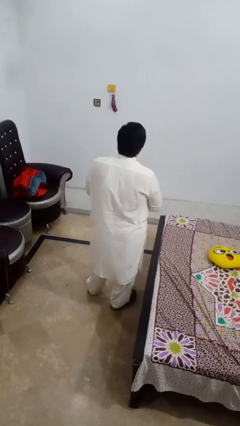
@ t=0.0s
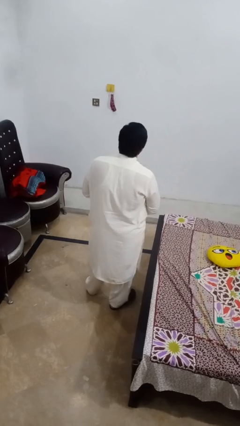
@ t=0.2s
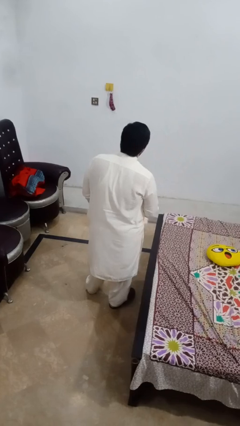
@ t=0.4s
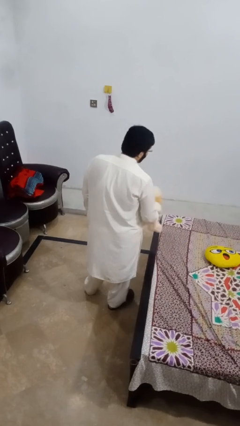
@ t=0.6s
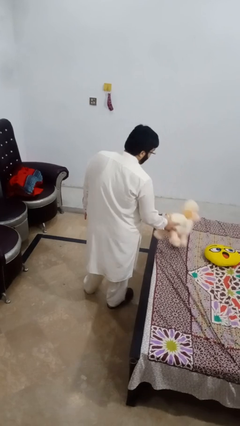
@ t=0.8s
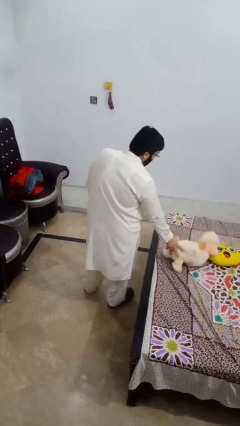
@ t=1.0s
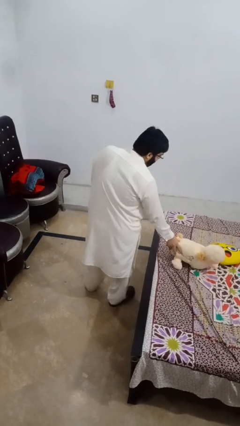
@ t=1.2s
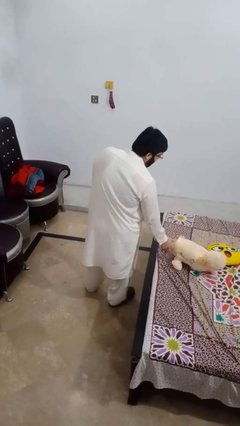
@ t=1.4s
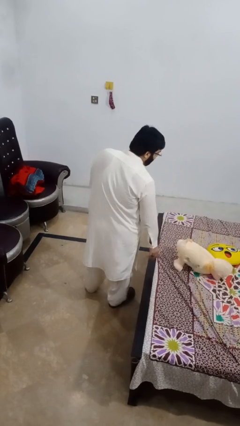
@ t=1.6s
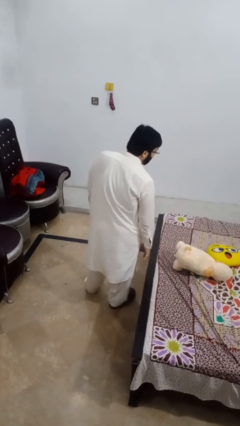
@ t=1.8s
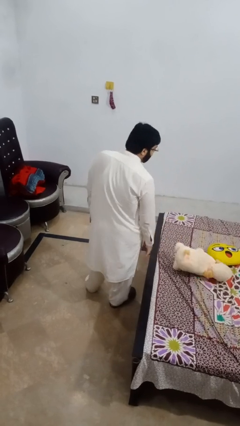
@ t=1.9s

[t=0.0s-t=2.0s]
person puts down object on bed

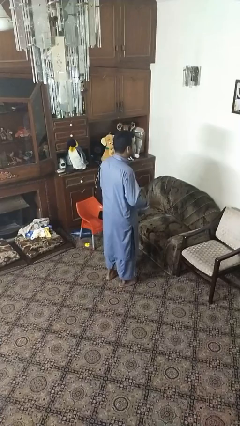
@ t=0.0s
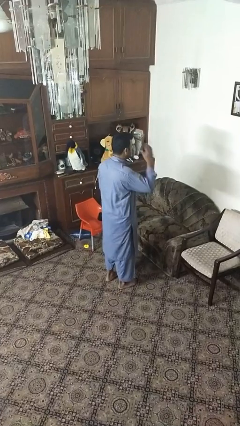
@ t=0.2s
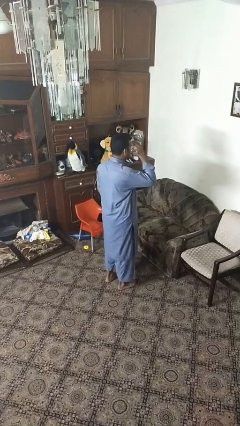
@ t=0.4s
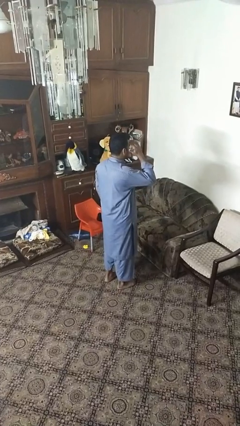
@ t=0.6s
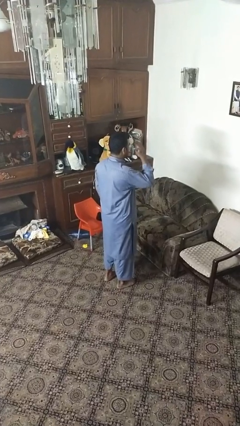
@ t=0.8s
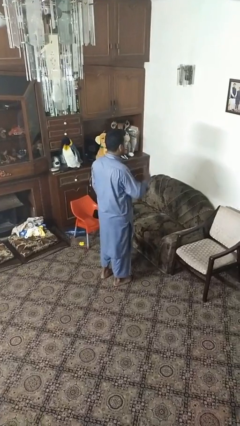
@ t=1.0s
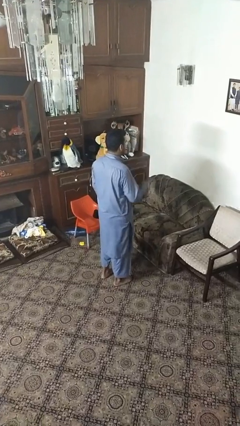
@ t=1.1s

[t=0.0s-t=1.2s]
person salutes

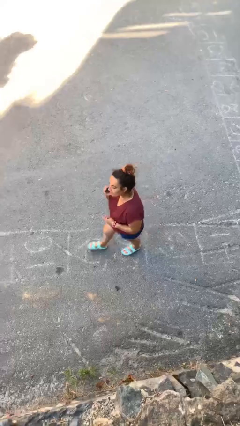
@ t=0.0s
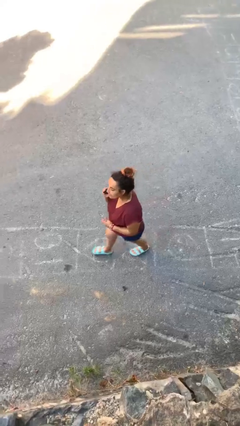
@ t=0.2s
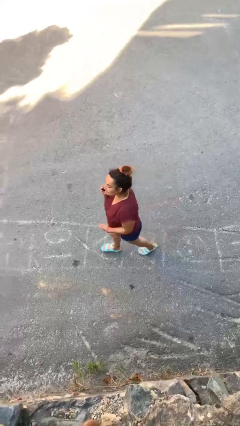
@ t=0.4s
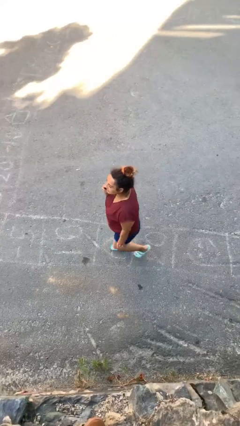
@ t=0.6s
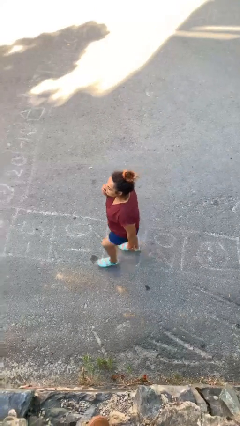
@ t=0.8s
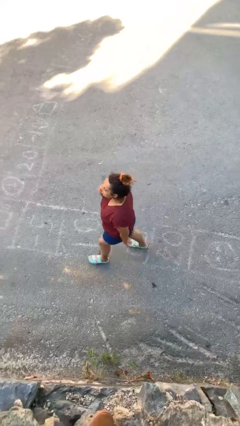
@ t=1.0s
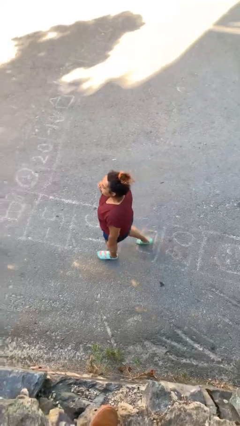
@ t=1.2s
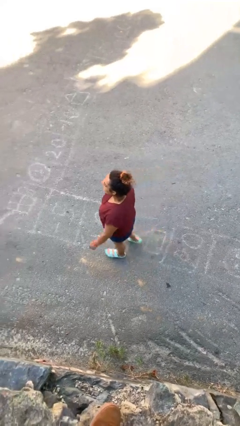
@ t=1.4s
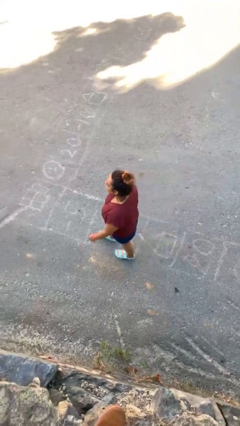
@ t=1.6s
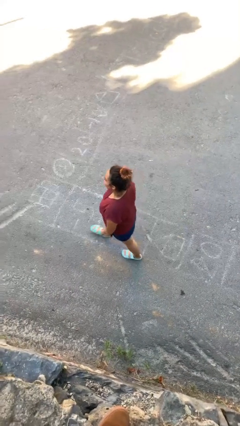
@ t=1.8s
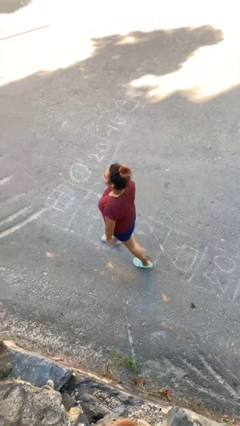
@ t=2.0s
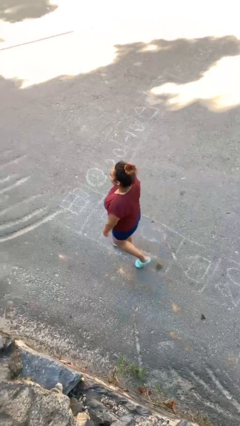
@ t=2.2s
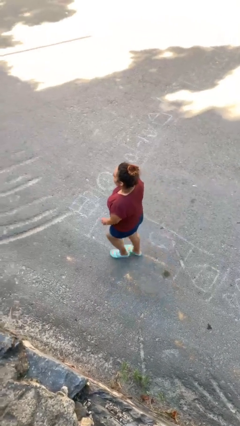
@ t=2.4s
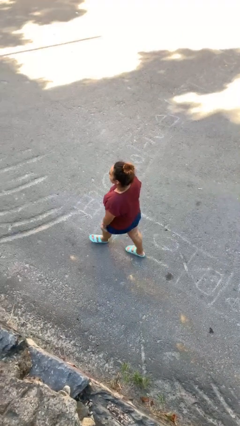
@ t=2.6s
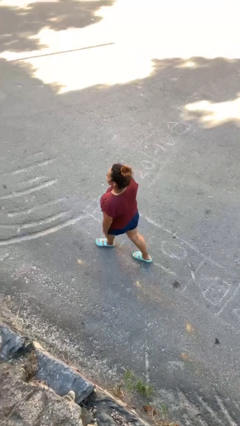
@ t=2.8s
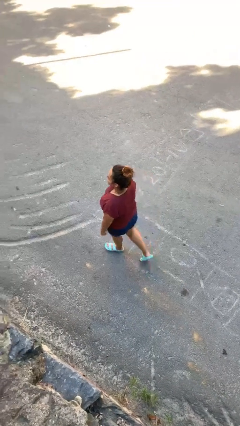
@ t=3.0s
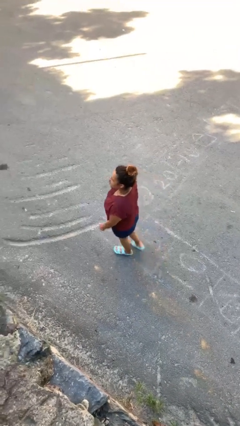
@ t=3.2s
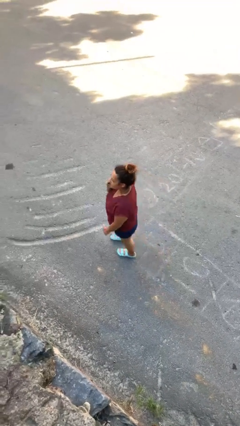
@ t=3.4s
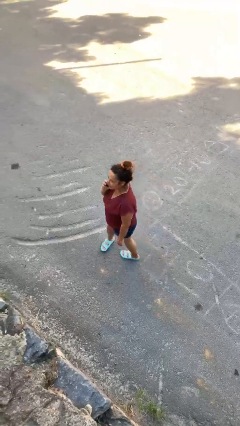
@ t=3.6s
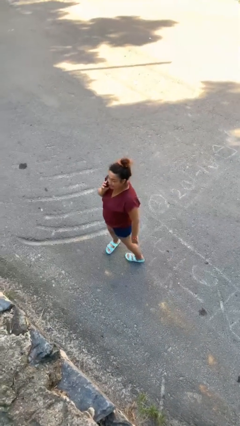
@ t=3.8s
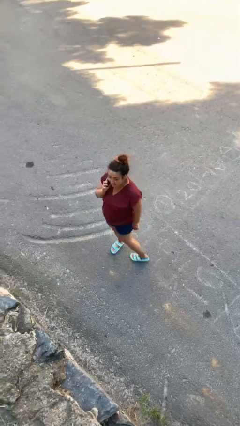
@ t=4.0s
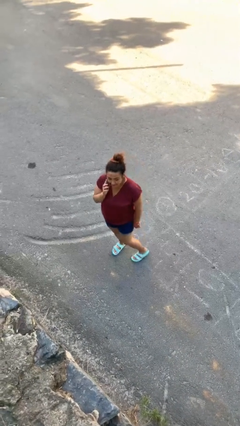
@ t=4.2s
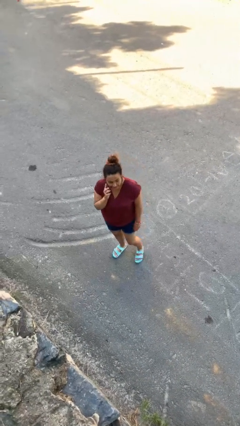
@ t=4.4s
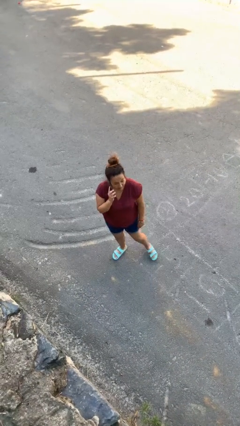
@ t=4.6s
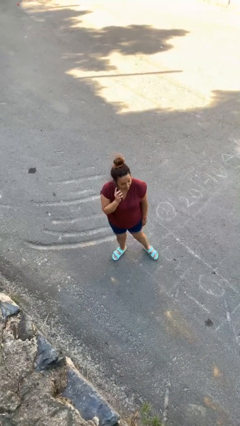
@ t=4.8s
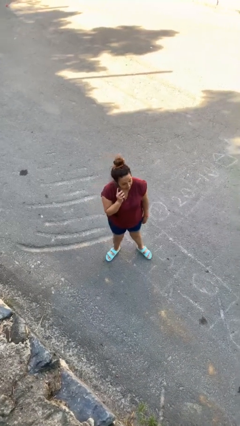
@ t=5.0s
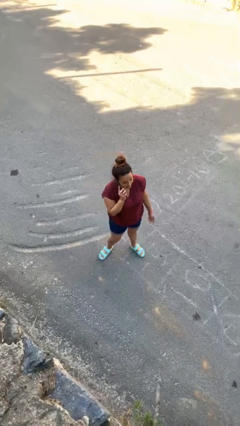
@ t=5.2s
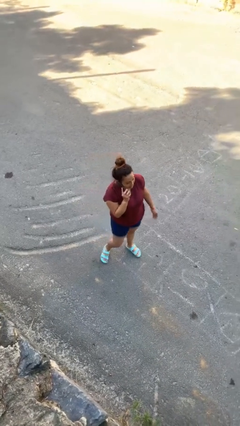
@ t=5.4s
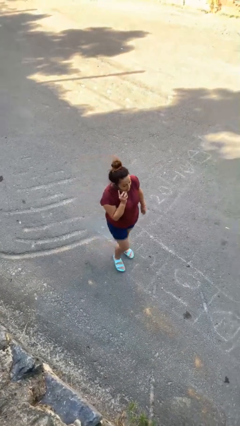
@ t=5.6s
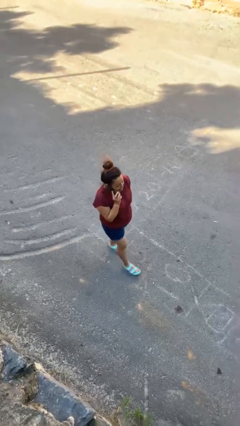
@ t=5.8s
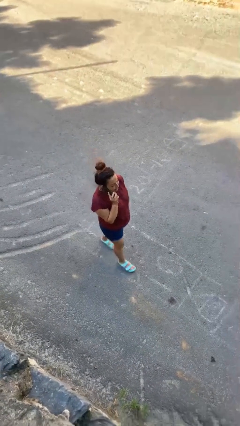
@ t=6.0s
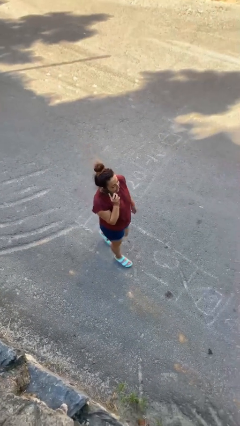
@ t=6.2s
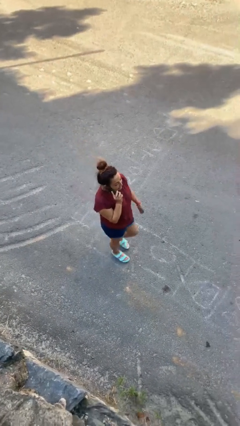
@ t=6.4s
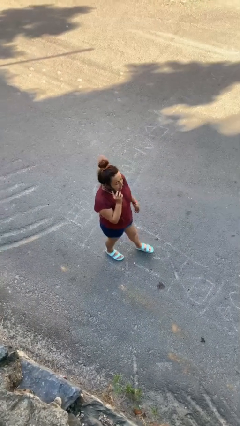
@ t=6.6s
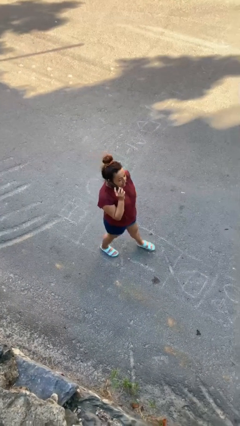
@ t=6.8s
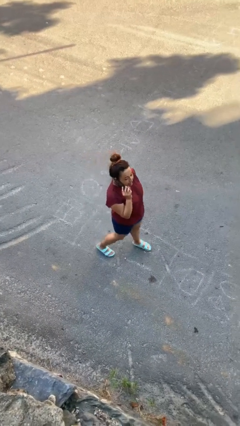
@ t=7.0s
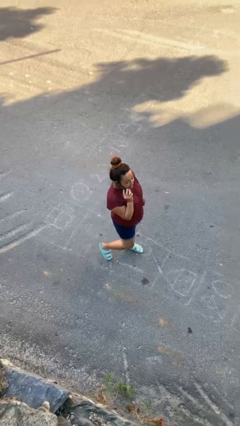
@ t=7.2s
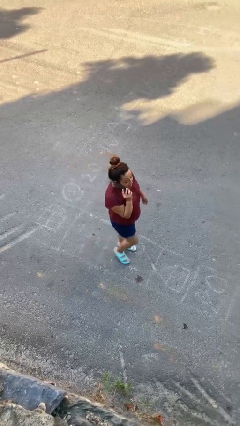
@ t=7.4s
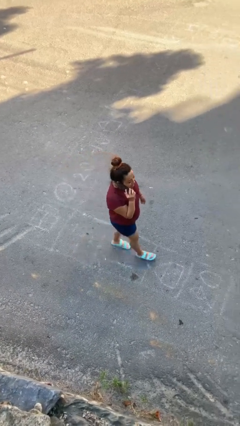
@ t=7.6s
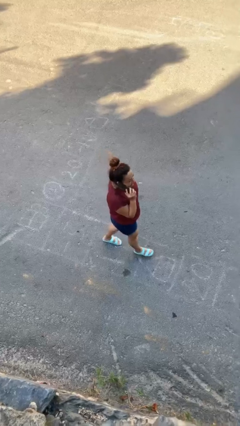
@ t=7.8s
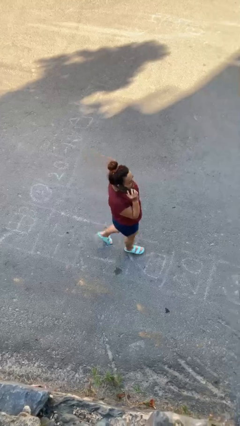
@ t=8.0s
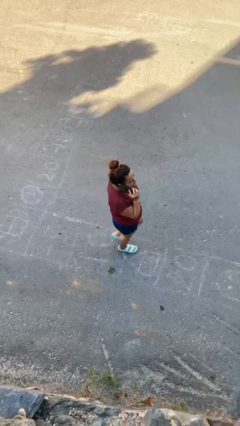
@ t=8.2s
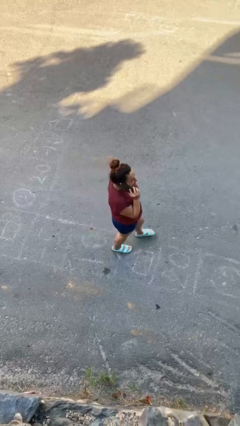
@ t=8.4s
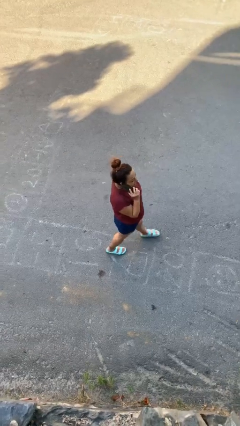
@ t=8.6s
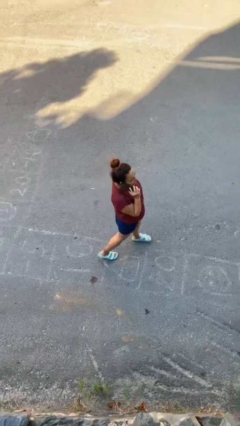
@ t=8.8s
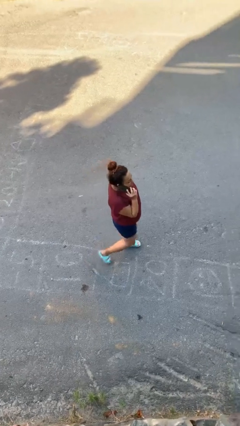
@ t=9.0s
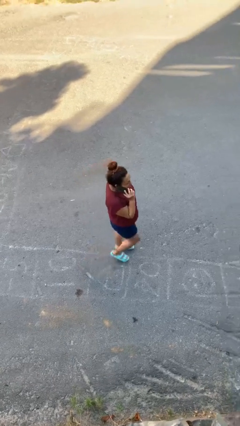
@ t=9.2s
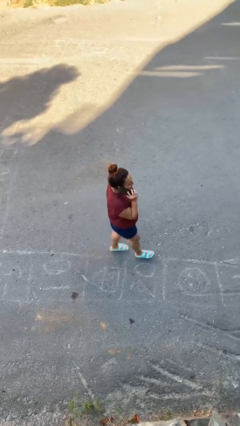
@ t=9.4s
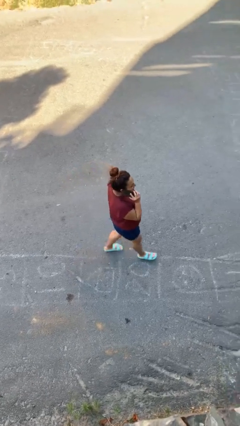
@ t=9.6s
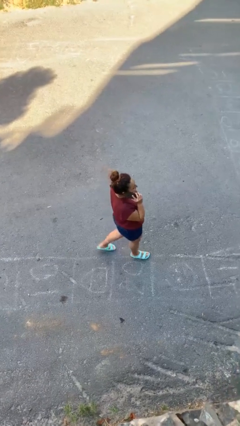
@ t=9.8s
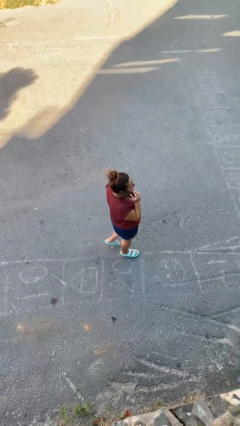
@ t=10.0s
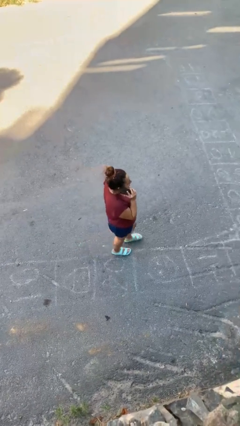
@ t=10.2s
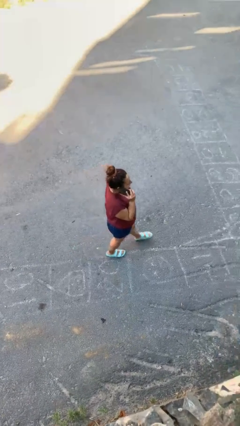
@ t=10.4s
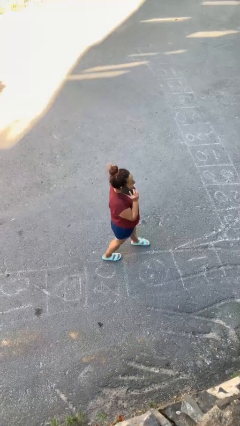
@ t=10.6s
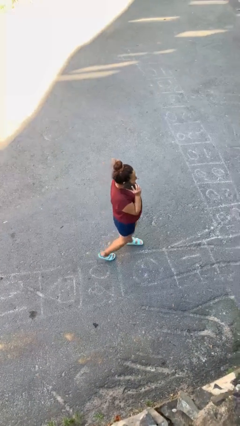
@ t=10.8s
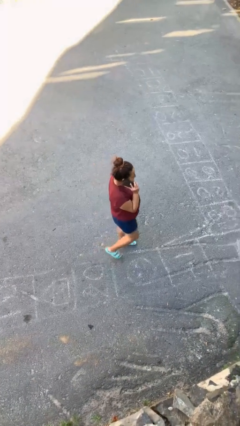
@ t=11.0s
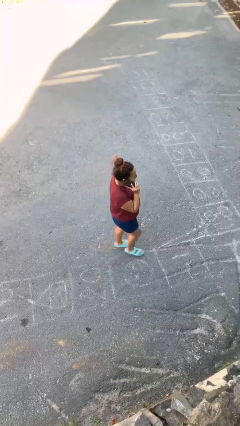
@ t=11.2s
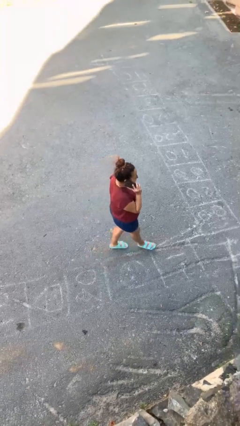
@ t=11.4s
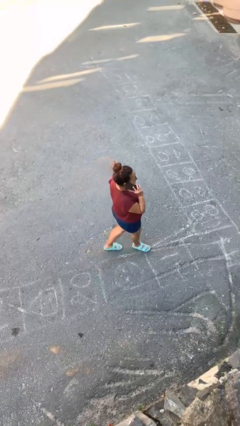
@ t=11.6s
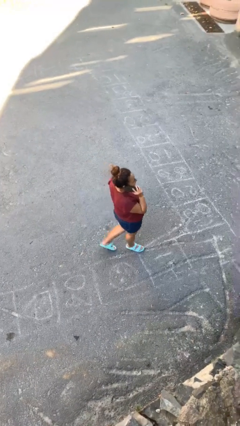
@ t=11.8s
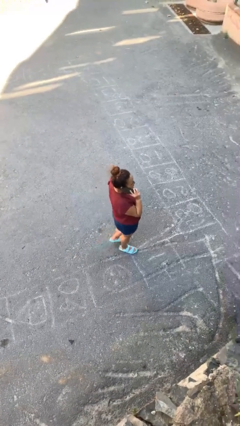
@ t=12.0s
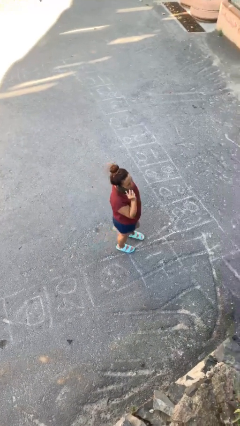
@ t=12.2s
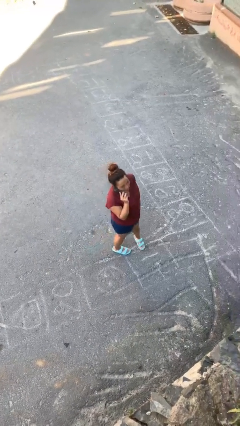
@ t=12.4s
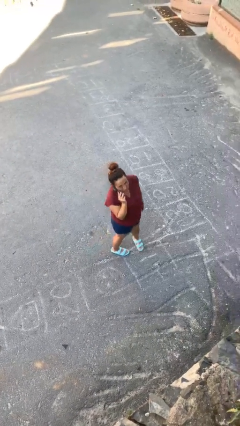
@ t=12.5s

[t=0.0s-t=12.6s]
person talks on phone

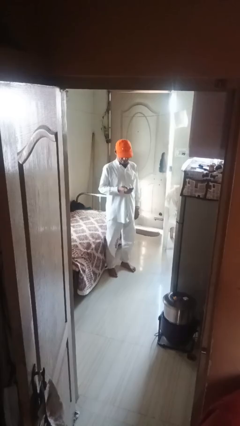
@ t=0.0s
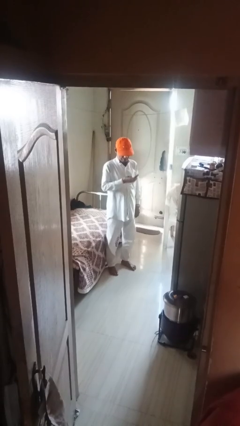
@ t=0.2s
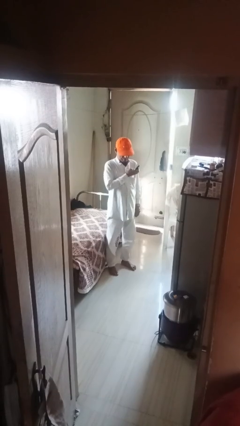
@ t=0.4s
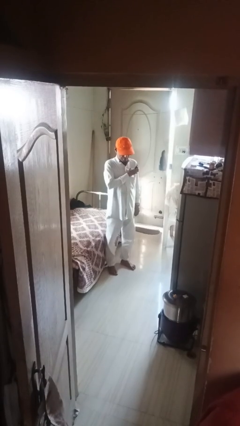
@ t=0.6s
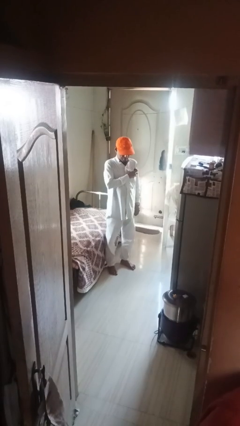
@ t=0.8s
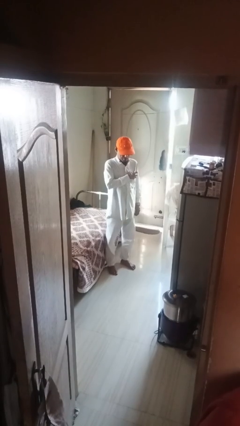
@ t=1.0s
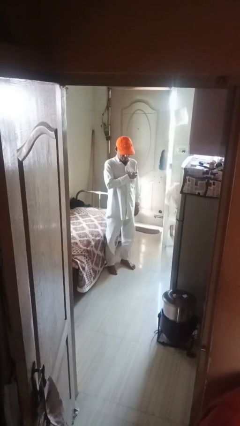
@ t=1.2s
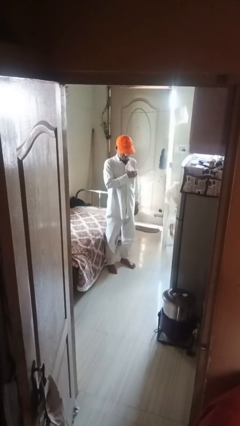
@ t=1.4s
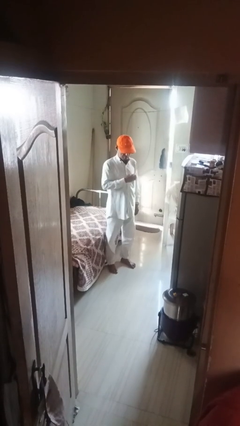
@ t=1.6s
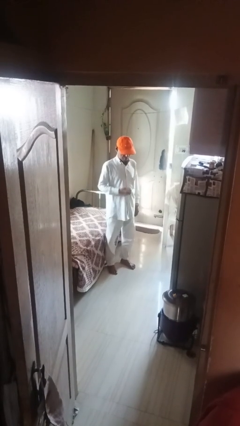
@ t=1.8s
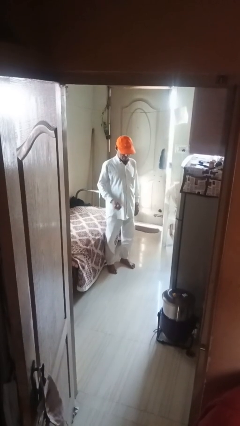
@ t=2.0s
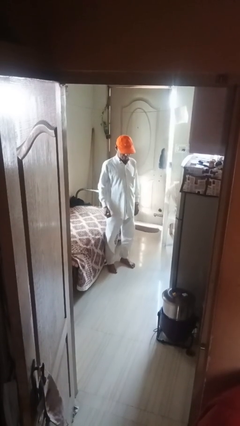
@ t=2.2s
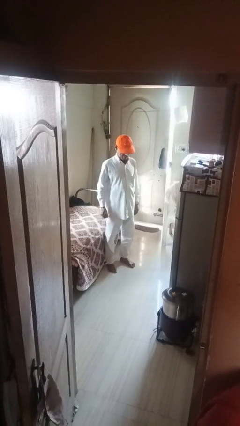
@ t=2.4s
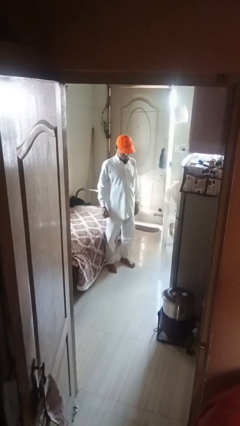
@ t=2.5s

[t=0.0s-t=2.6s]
person puts phone into pocket
